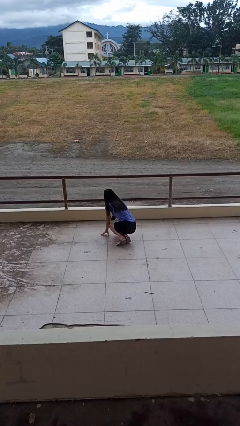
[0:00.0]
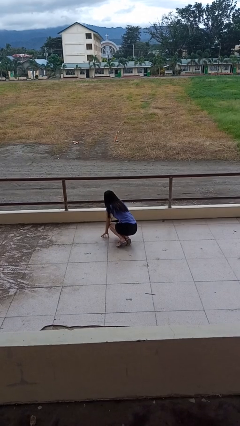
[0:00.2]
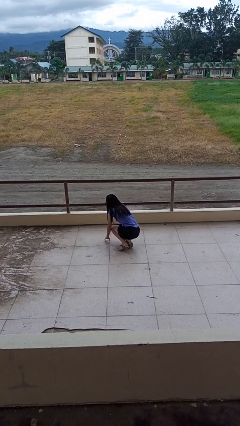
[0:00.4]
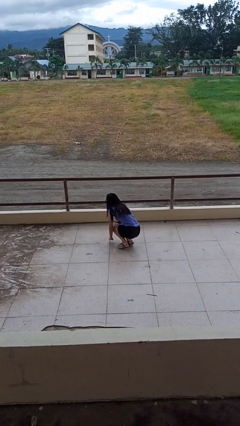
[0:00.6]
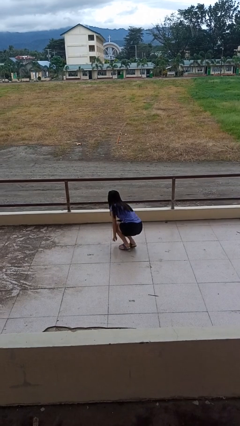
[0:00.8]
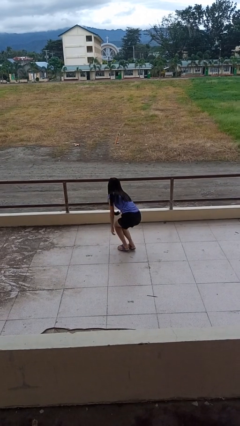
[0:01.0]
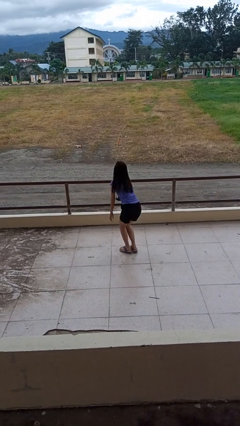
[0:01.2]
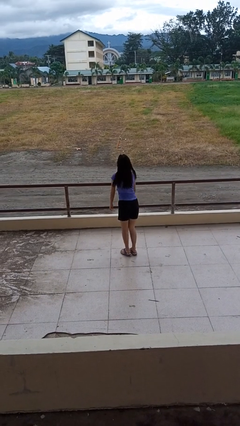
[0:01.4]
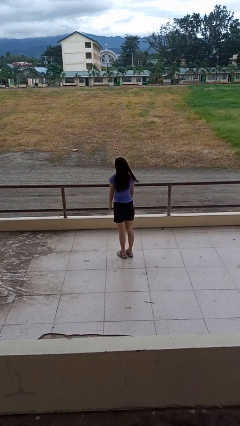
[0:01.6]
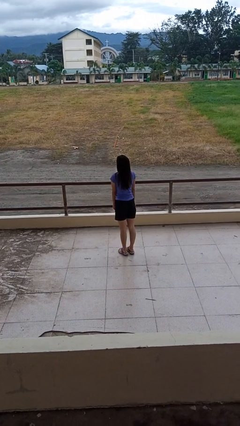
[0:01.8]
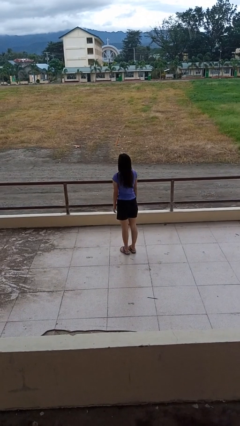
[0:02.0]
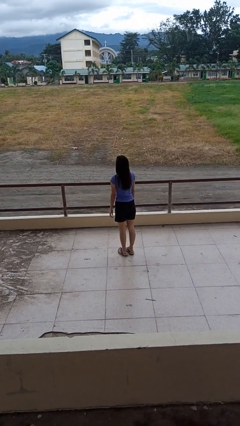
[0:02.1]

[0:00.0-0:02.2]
person stands up from floor

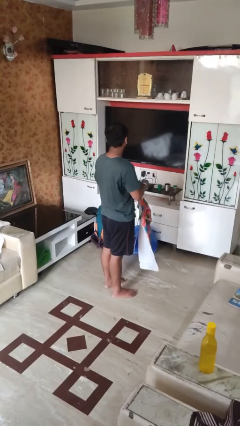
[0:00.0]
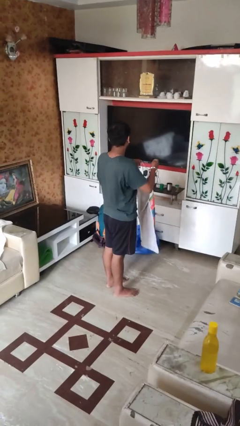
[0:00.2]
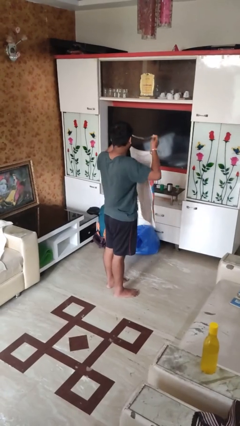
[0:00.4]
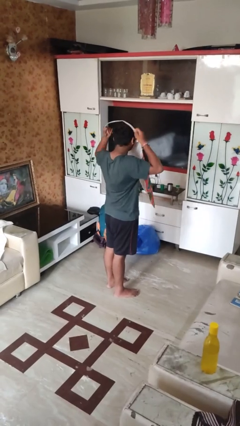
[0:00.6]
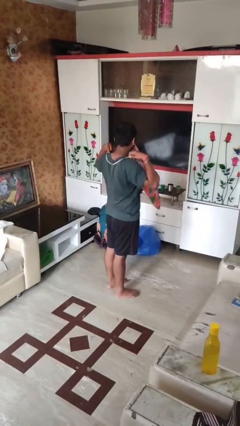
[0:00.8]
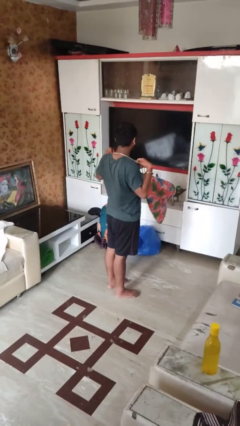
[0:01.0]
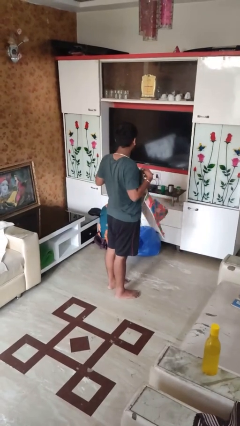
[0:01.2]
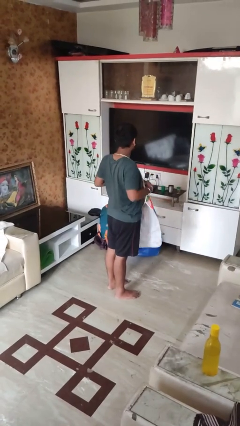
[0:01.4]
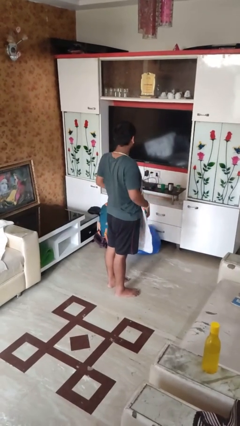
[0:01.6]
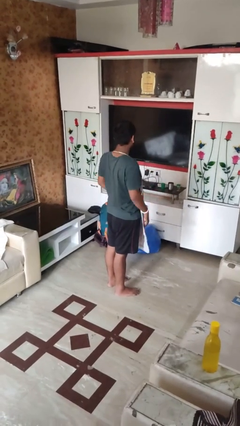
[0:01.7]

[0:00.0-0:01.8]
person puts on apron

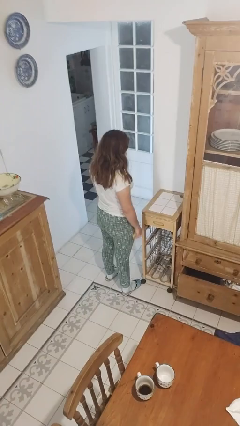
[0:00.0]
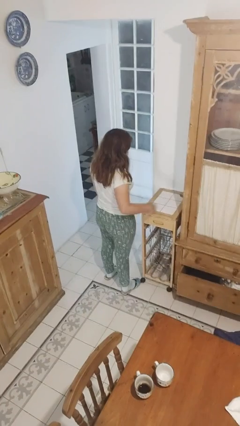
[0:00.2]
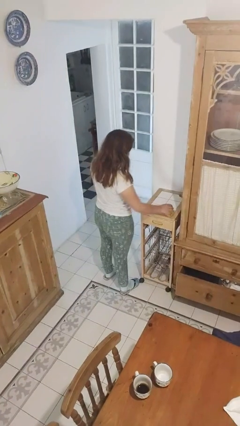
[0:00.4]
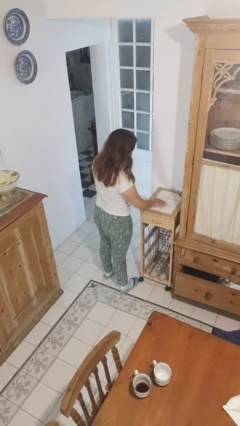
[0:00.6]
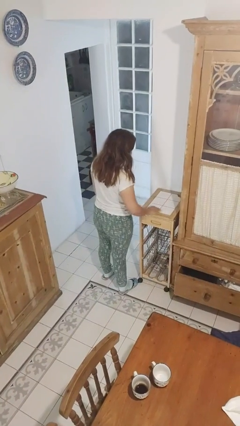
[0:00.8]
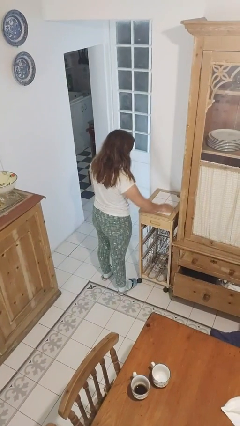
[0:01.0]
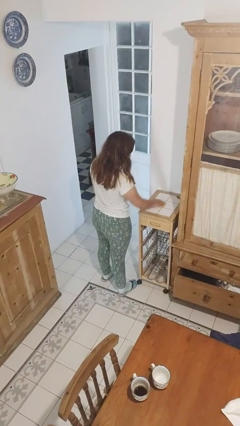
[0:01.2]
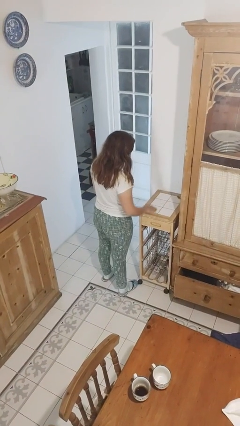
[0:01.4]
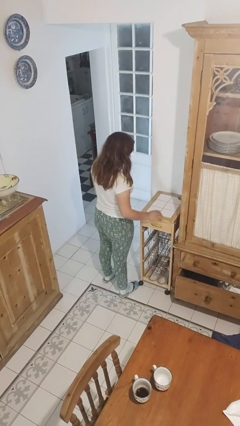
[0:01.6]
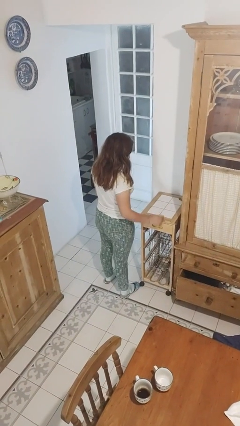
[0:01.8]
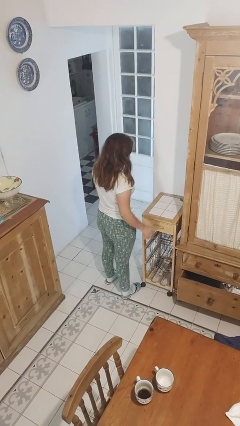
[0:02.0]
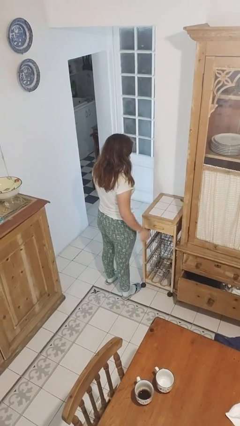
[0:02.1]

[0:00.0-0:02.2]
person cleans table with rag

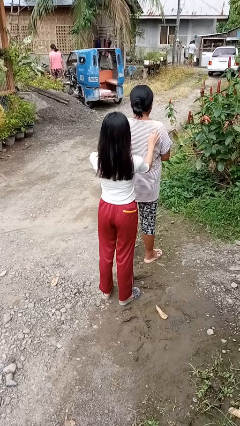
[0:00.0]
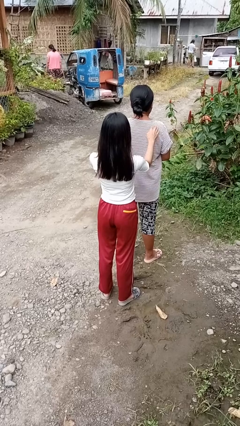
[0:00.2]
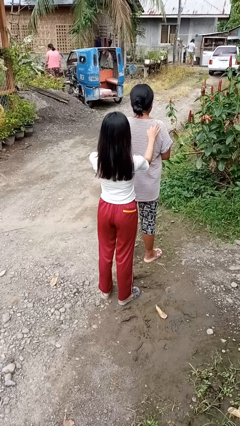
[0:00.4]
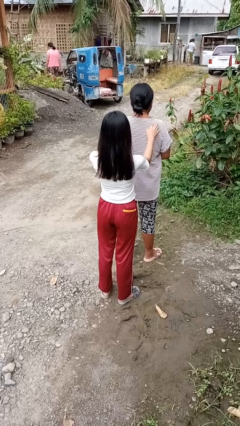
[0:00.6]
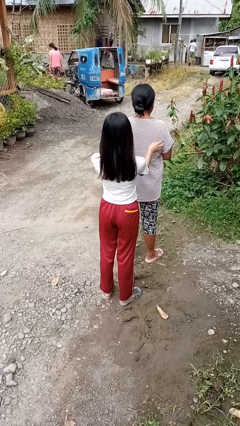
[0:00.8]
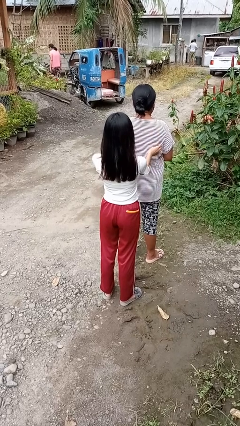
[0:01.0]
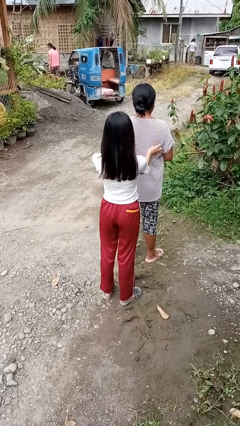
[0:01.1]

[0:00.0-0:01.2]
person tickles person

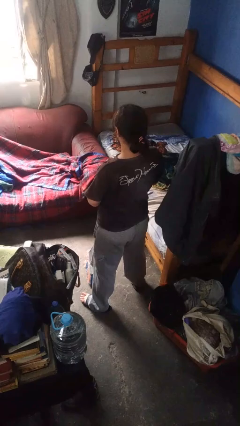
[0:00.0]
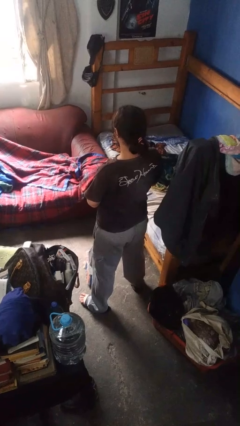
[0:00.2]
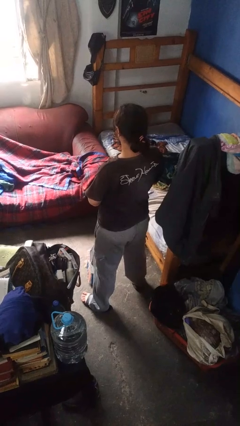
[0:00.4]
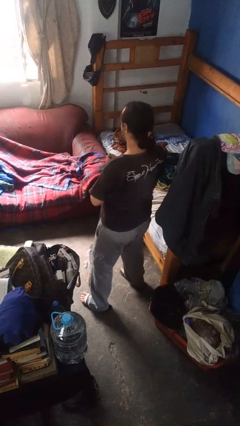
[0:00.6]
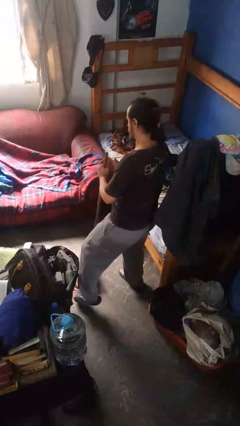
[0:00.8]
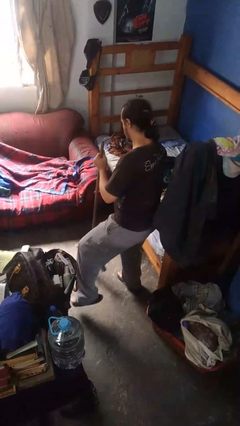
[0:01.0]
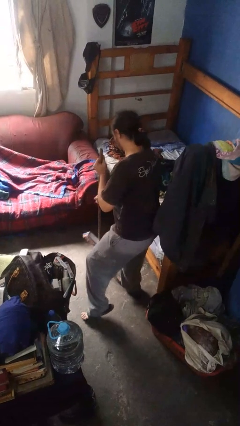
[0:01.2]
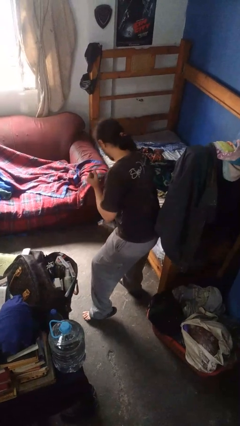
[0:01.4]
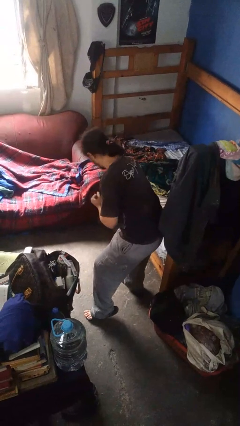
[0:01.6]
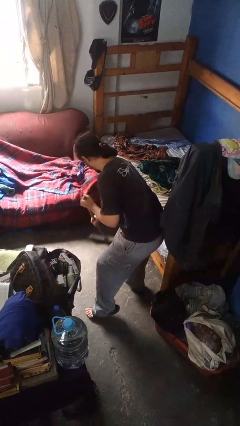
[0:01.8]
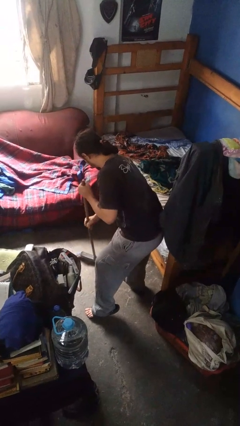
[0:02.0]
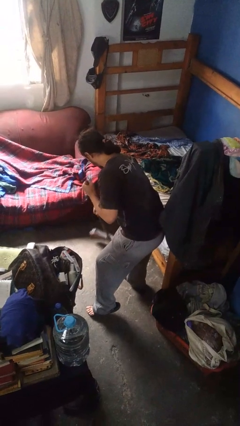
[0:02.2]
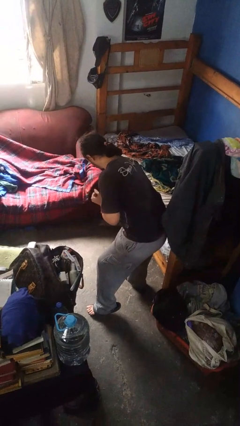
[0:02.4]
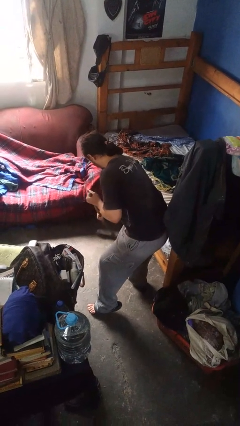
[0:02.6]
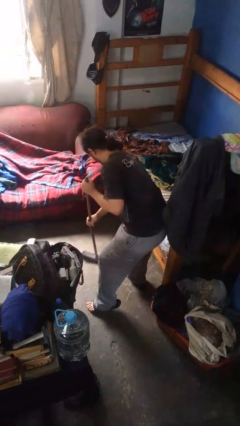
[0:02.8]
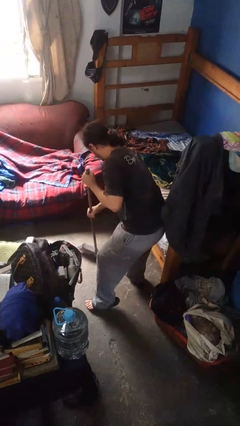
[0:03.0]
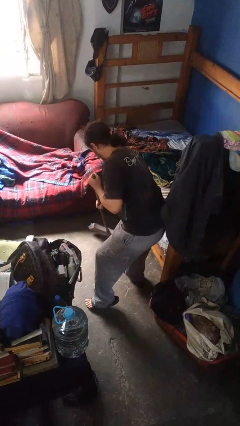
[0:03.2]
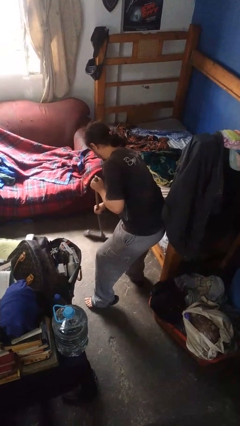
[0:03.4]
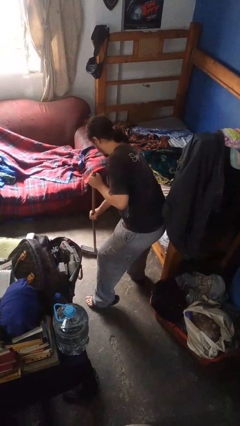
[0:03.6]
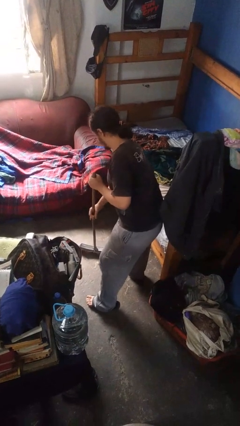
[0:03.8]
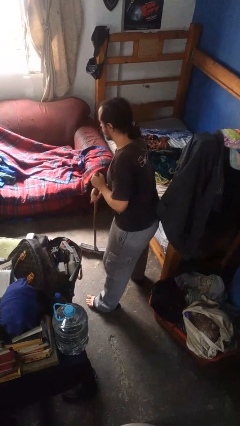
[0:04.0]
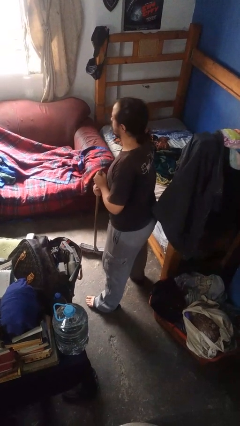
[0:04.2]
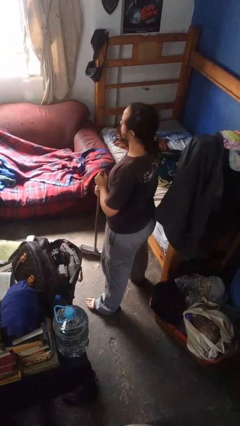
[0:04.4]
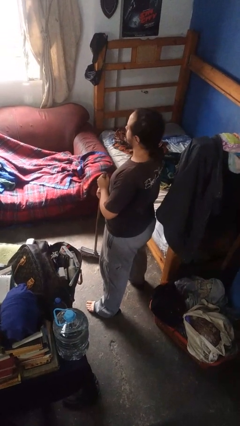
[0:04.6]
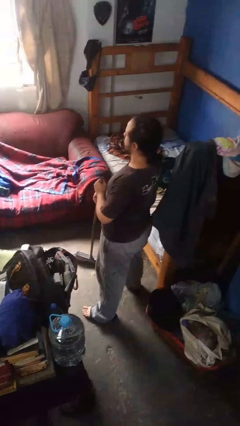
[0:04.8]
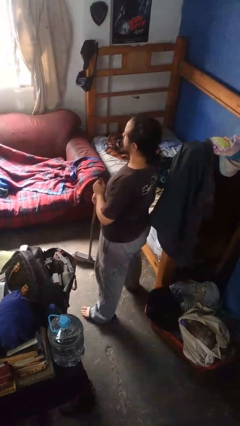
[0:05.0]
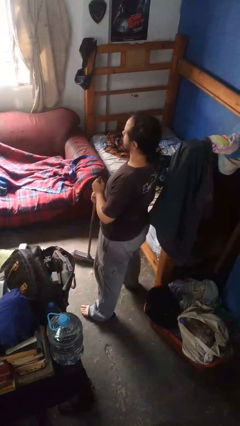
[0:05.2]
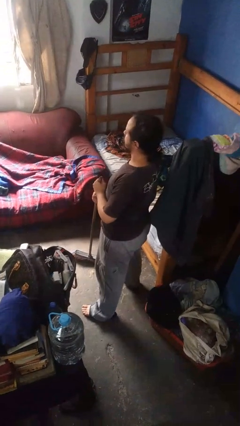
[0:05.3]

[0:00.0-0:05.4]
person sweeps floor

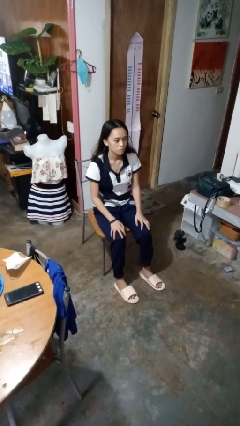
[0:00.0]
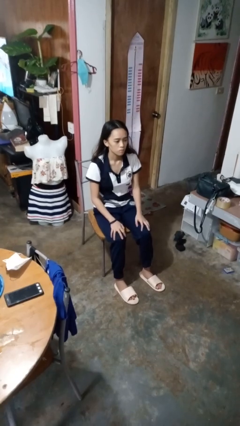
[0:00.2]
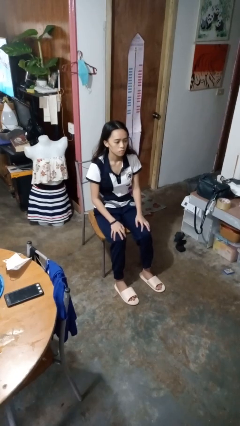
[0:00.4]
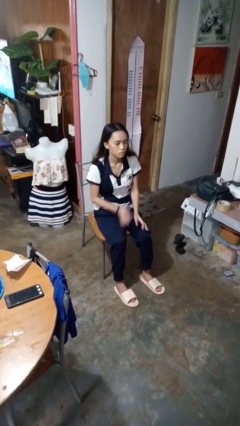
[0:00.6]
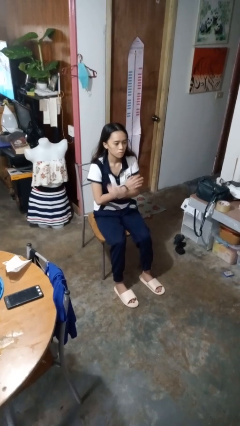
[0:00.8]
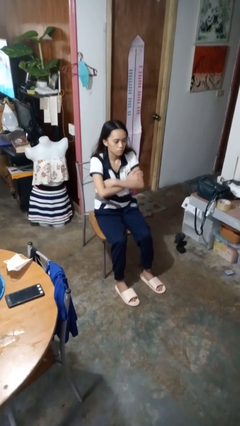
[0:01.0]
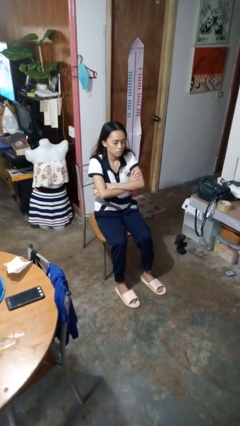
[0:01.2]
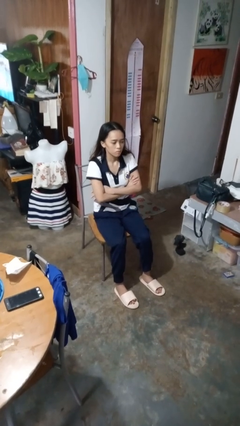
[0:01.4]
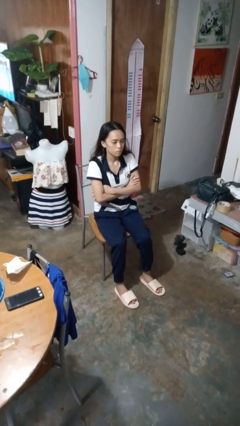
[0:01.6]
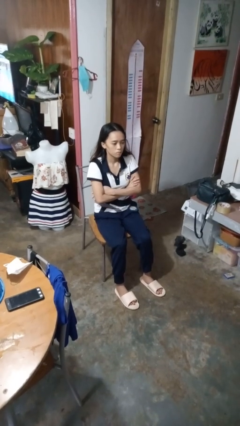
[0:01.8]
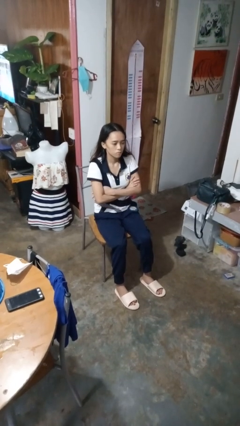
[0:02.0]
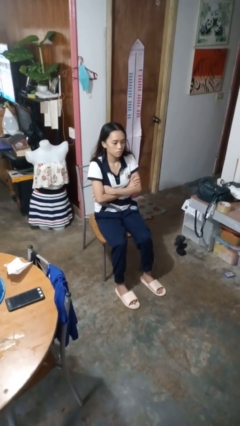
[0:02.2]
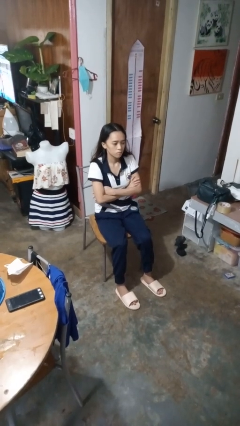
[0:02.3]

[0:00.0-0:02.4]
person crosses arms

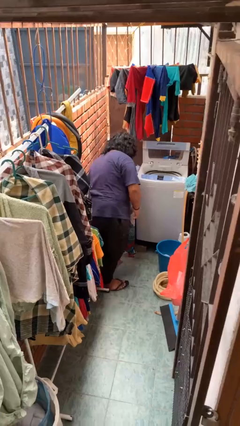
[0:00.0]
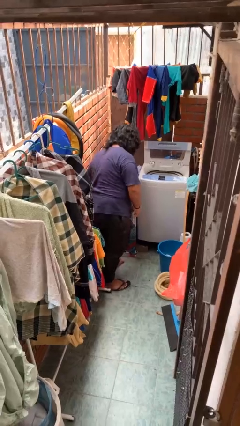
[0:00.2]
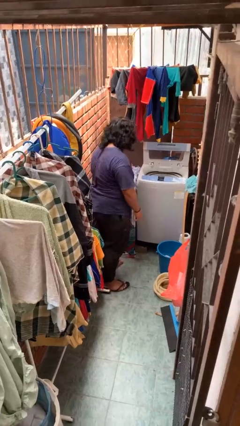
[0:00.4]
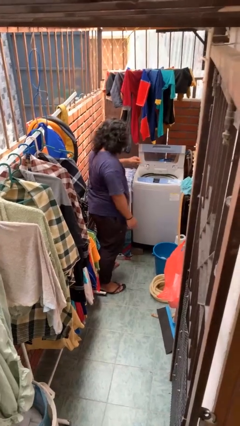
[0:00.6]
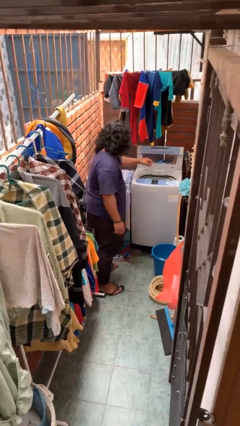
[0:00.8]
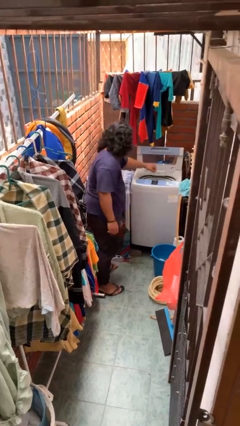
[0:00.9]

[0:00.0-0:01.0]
person loads dryer

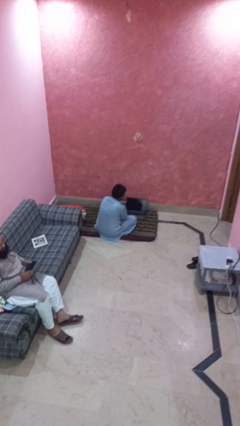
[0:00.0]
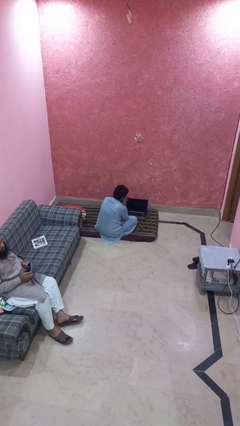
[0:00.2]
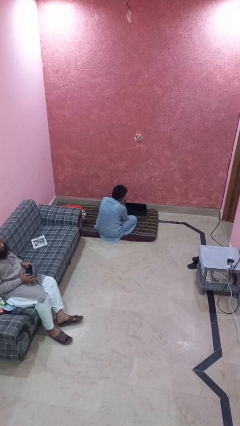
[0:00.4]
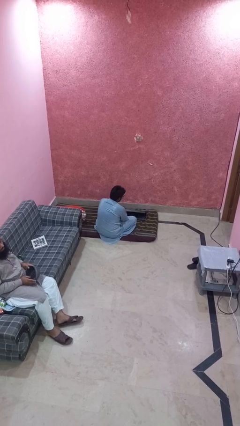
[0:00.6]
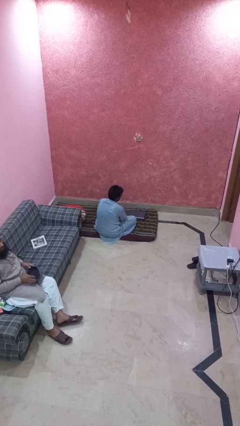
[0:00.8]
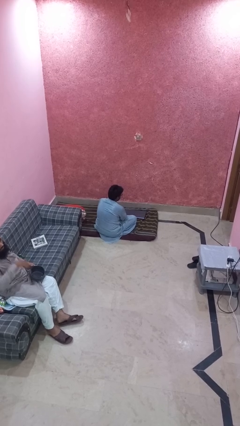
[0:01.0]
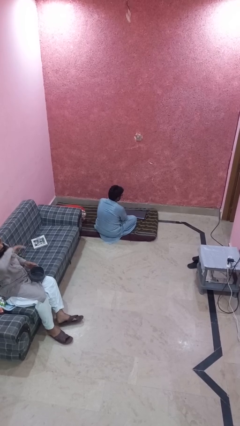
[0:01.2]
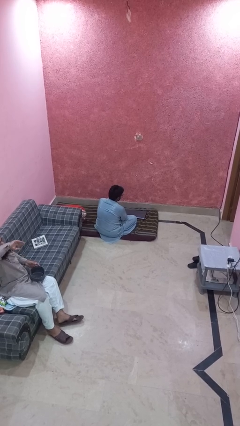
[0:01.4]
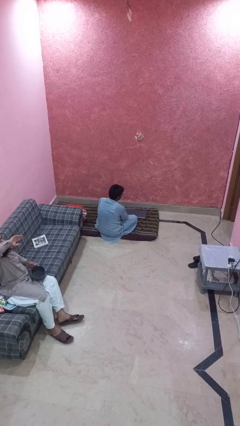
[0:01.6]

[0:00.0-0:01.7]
person closes laptop
